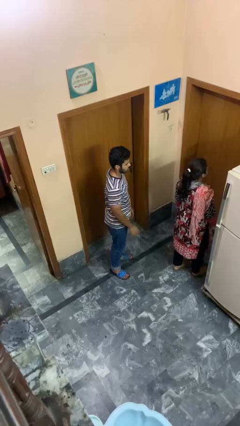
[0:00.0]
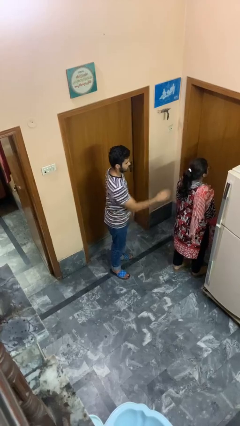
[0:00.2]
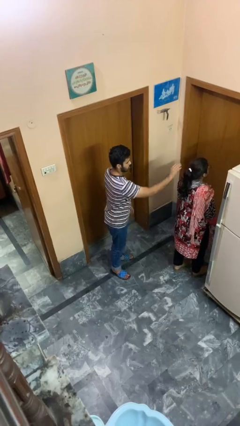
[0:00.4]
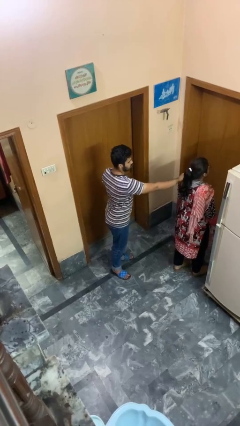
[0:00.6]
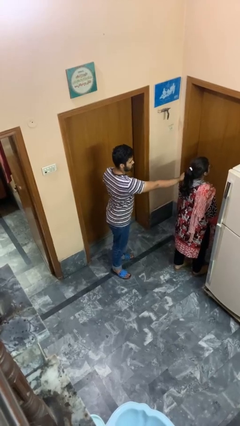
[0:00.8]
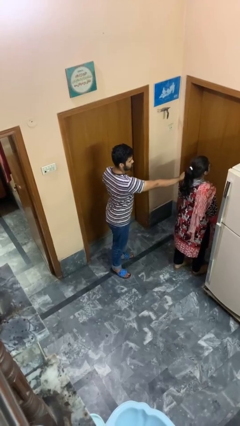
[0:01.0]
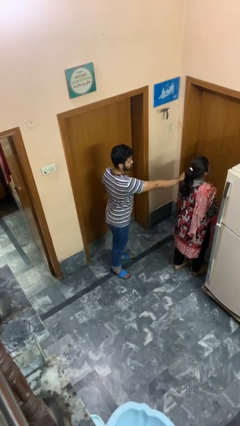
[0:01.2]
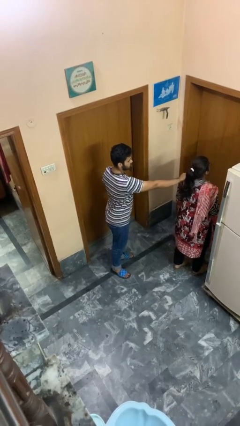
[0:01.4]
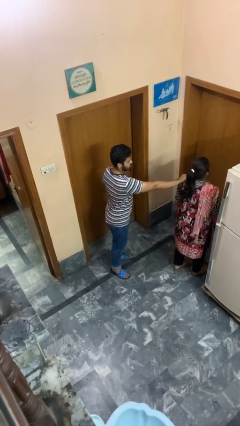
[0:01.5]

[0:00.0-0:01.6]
person grabs person by shoulder

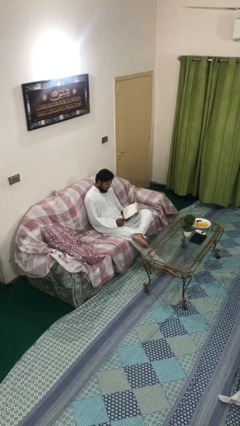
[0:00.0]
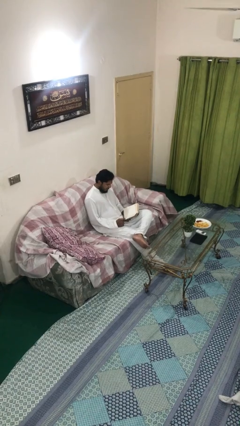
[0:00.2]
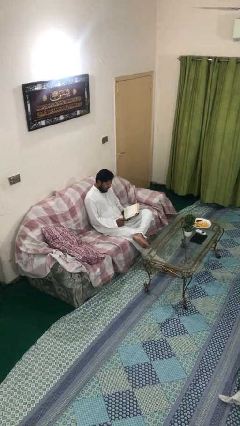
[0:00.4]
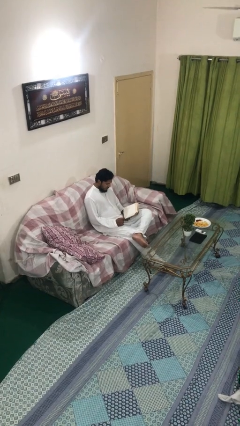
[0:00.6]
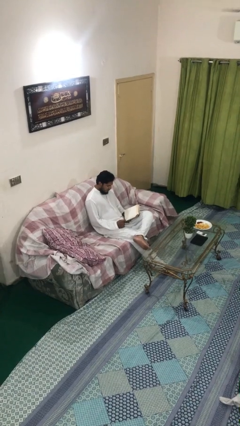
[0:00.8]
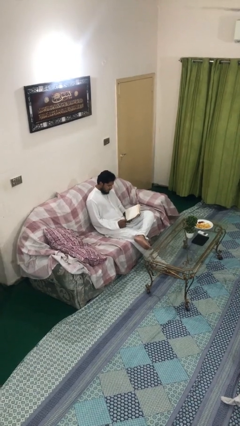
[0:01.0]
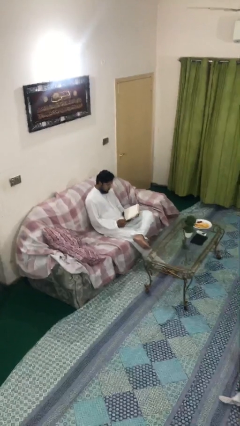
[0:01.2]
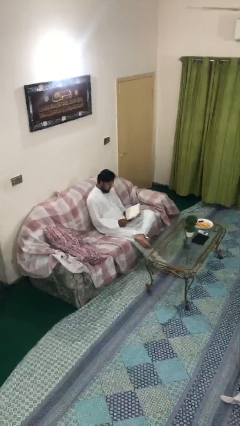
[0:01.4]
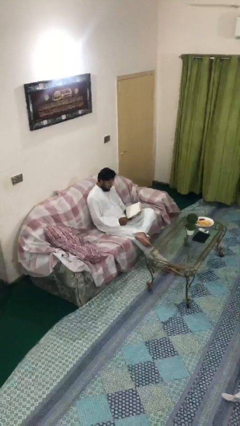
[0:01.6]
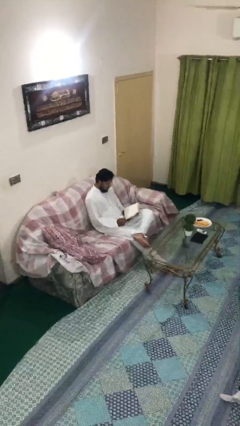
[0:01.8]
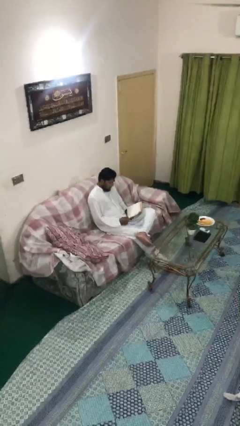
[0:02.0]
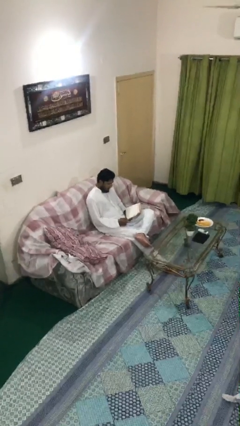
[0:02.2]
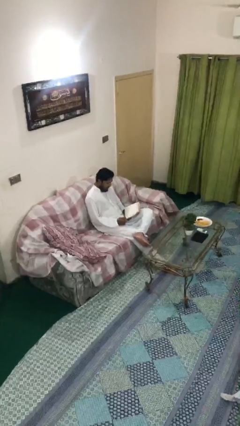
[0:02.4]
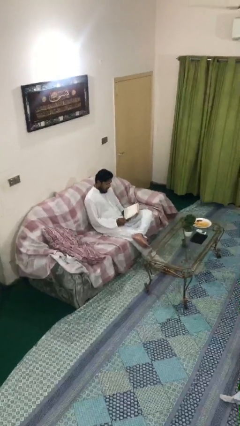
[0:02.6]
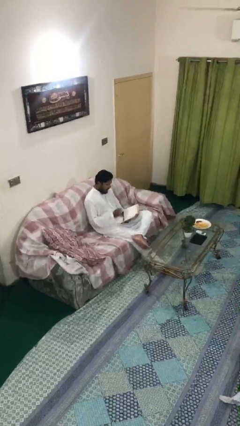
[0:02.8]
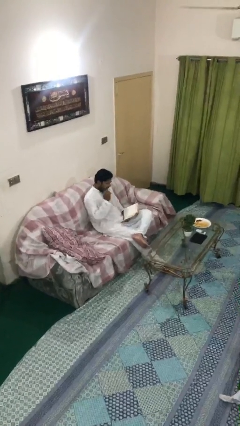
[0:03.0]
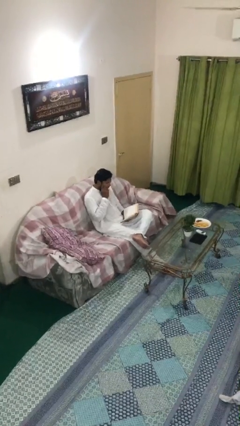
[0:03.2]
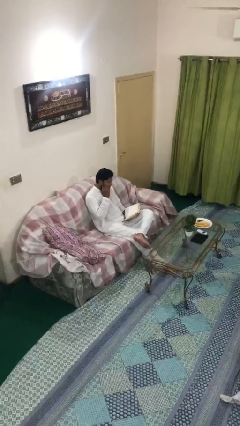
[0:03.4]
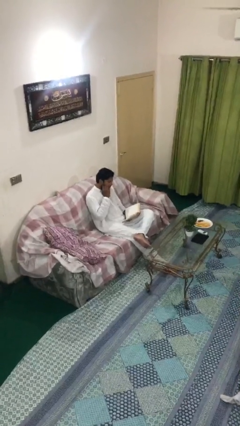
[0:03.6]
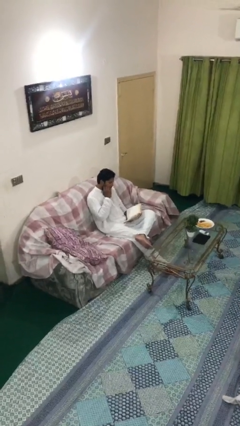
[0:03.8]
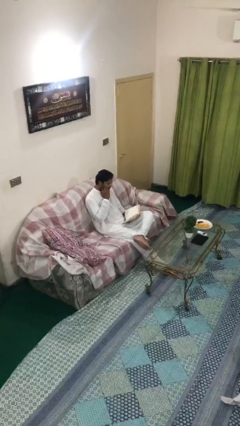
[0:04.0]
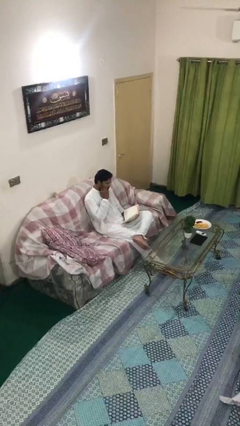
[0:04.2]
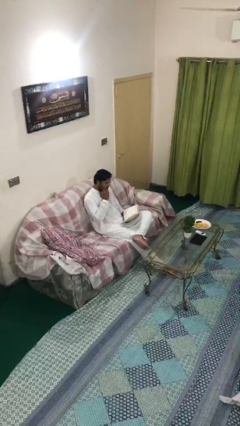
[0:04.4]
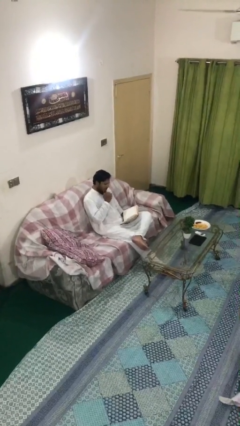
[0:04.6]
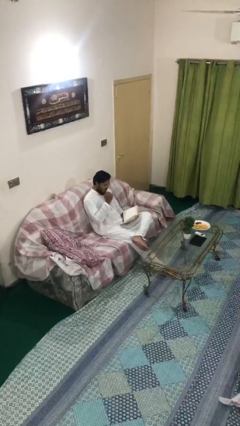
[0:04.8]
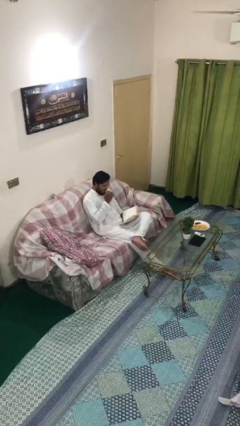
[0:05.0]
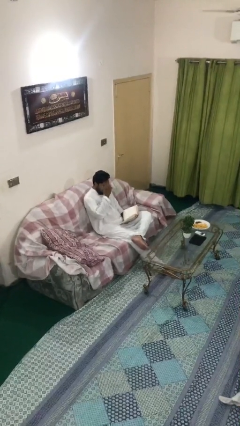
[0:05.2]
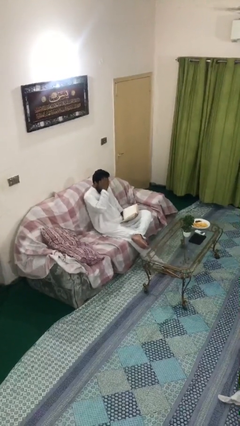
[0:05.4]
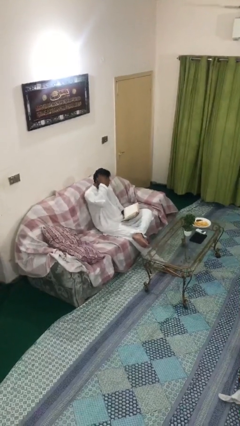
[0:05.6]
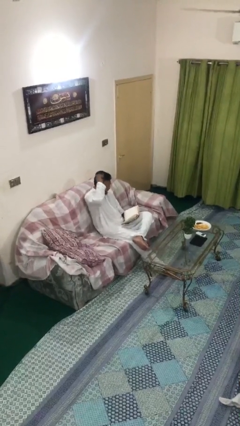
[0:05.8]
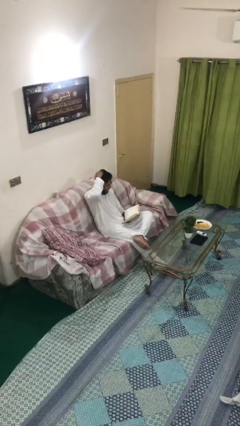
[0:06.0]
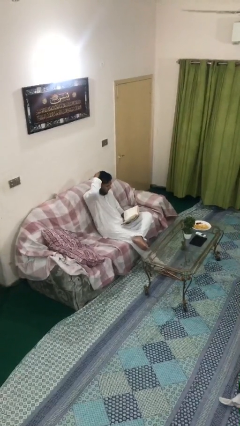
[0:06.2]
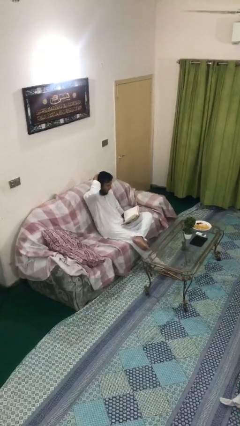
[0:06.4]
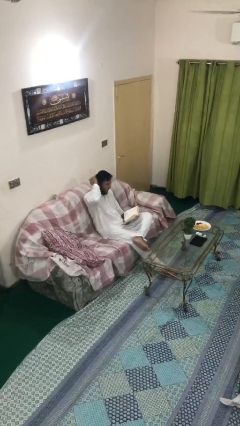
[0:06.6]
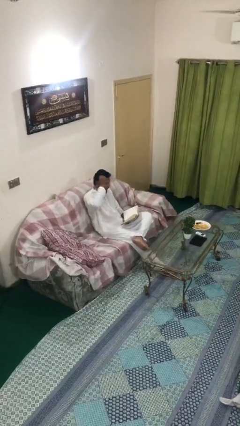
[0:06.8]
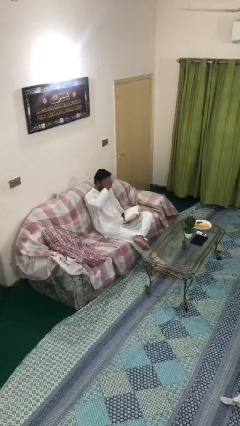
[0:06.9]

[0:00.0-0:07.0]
person reads document

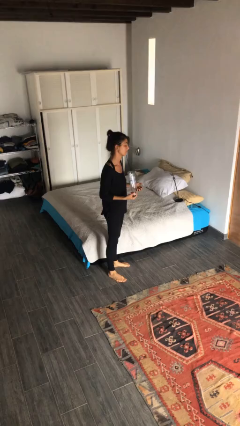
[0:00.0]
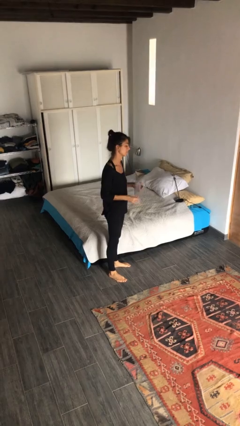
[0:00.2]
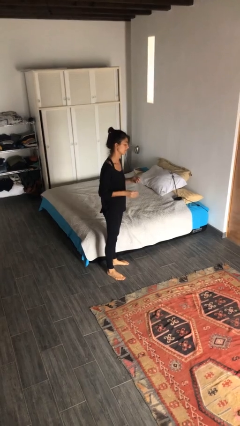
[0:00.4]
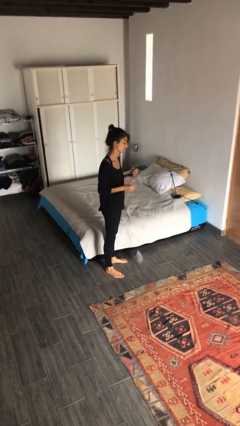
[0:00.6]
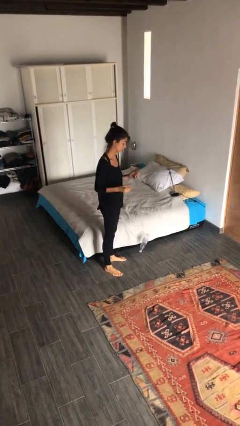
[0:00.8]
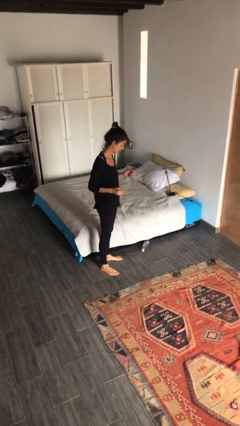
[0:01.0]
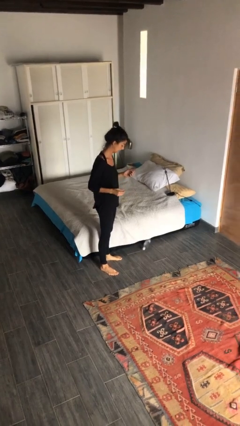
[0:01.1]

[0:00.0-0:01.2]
person drops object

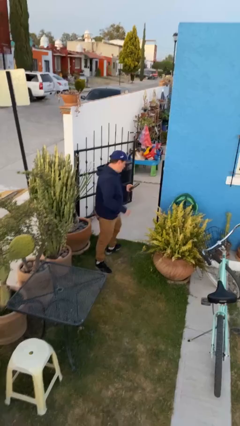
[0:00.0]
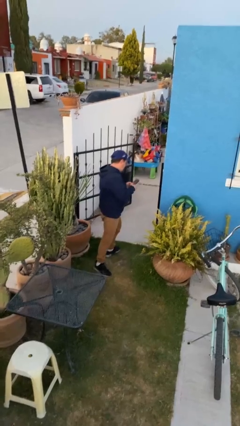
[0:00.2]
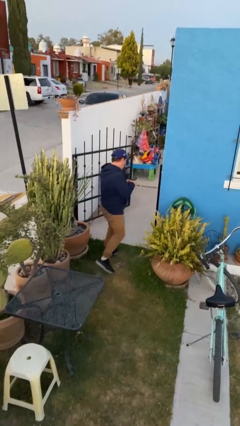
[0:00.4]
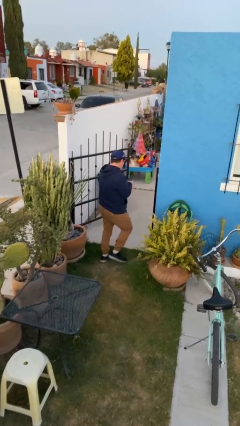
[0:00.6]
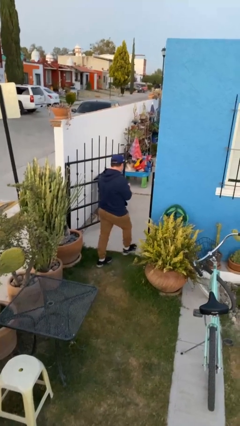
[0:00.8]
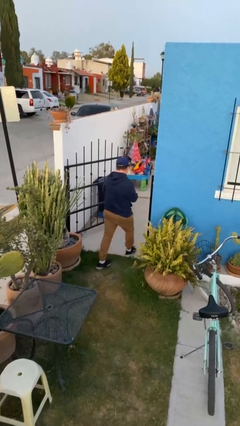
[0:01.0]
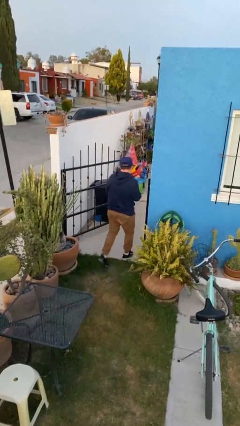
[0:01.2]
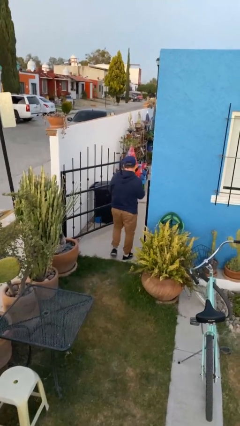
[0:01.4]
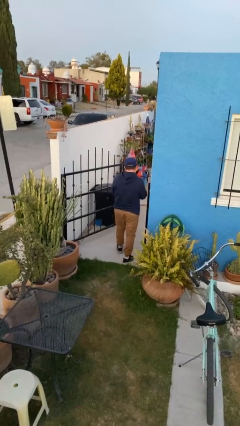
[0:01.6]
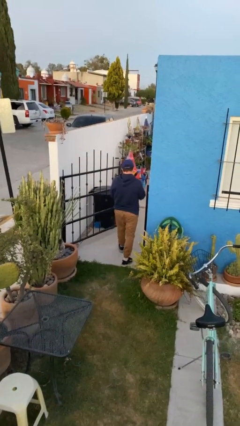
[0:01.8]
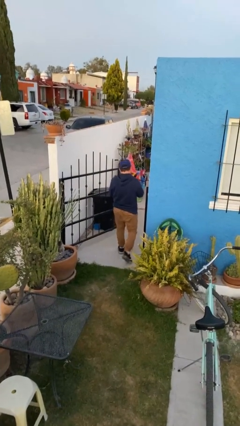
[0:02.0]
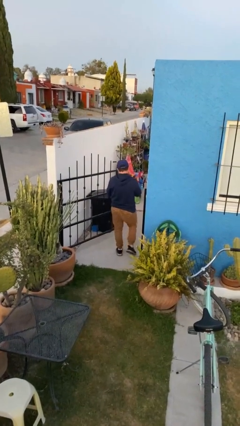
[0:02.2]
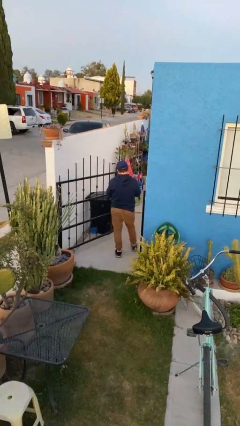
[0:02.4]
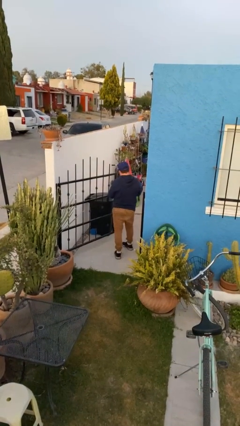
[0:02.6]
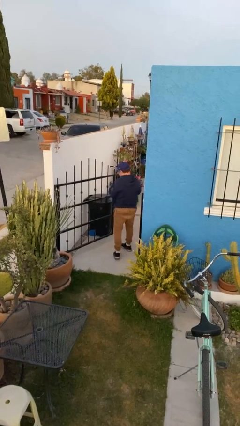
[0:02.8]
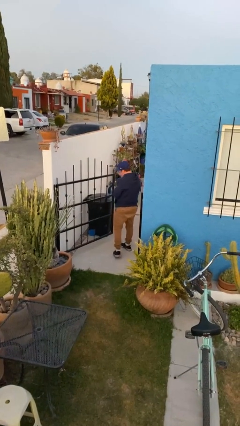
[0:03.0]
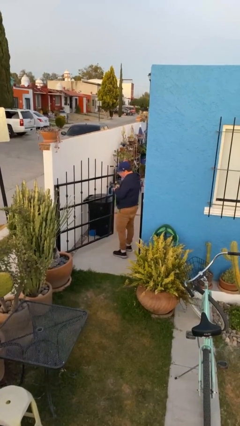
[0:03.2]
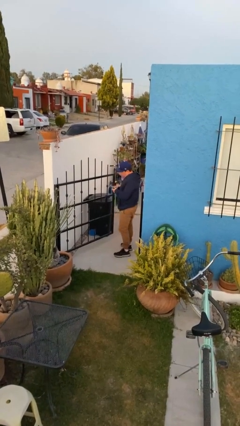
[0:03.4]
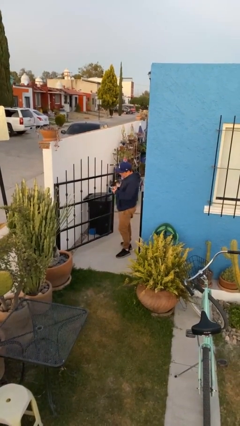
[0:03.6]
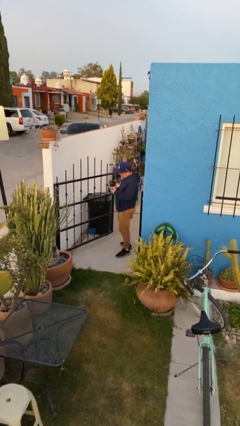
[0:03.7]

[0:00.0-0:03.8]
person exits scene through structure

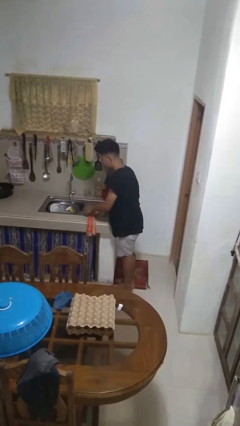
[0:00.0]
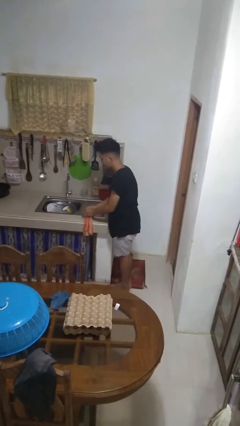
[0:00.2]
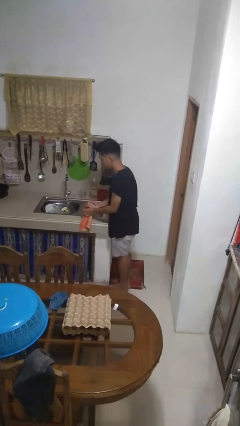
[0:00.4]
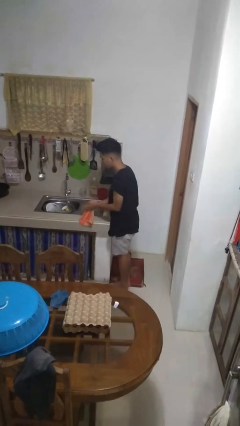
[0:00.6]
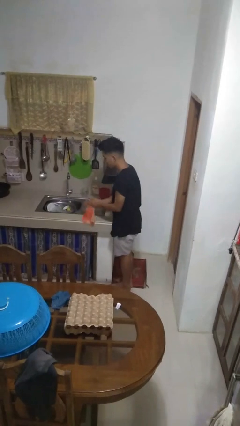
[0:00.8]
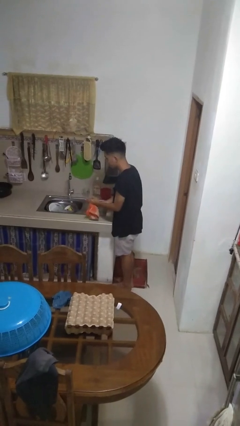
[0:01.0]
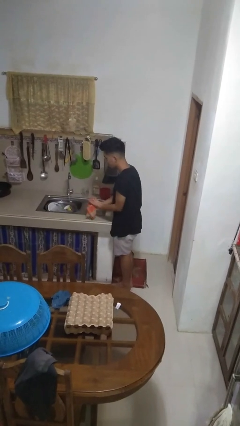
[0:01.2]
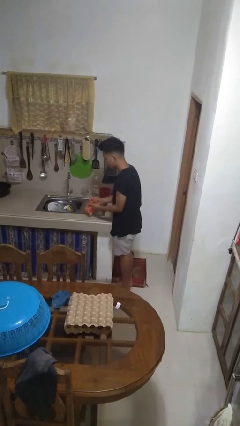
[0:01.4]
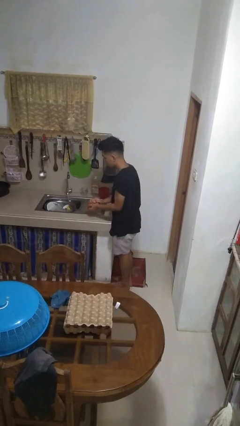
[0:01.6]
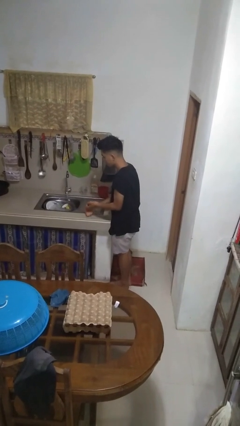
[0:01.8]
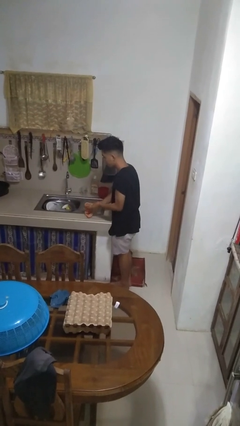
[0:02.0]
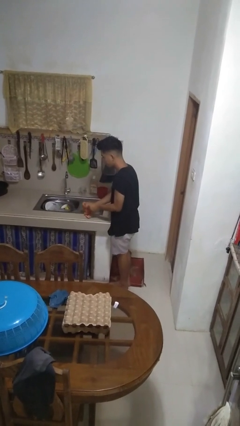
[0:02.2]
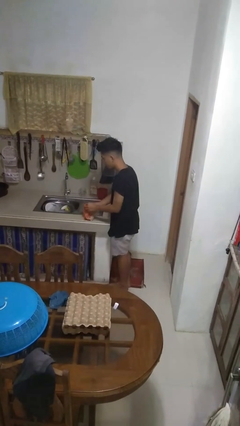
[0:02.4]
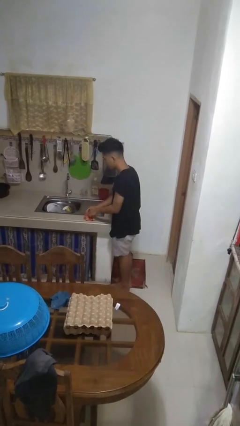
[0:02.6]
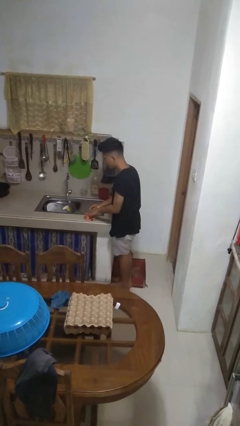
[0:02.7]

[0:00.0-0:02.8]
person dries hands with towel

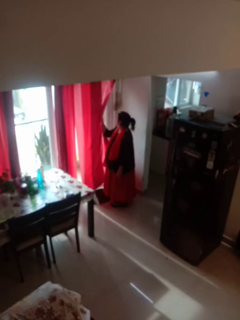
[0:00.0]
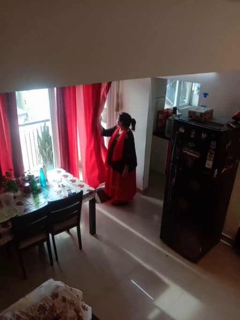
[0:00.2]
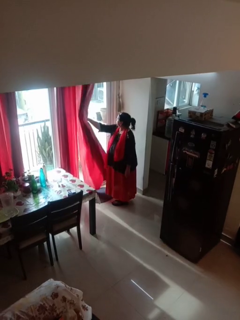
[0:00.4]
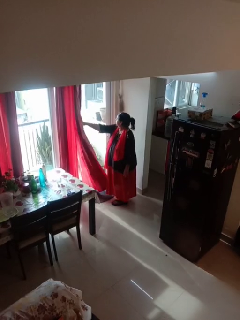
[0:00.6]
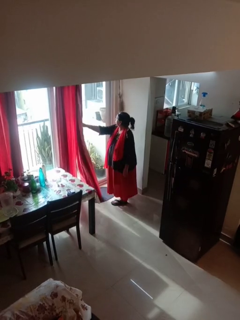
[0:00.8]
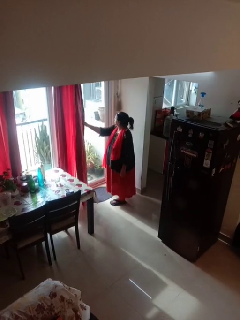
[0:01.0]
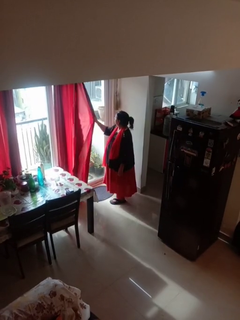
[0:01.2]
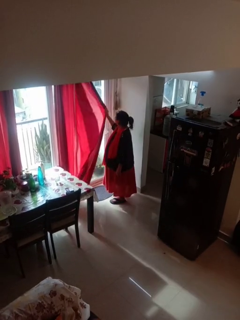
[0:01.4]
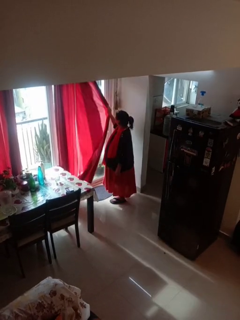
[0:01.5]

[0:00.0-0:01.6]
person opens curtains
